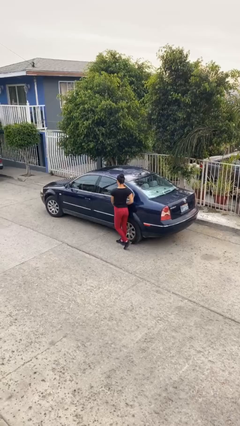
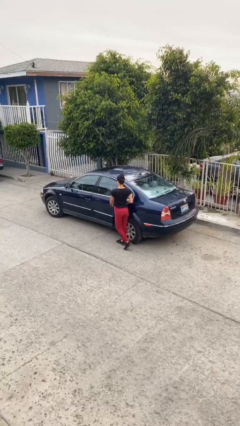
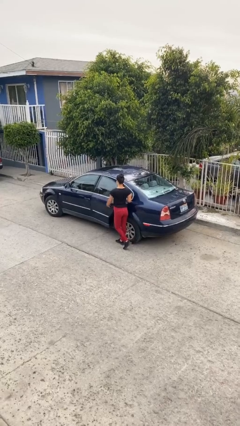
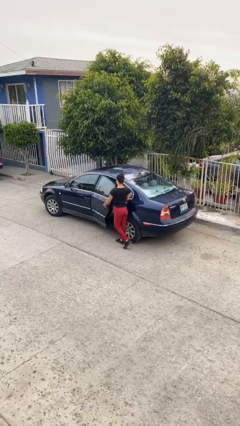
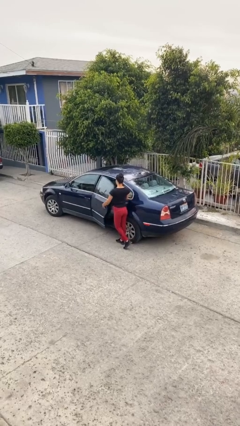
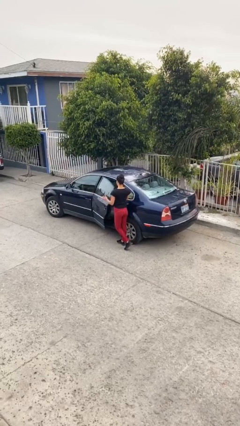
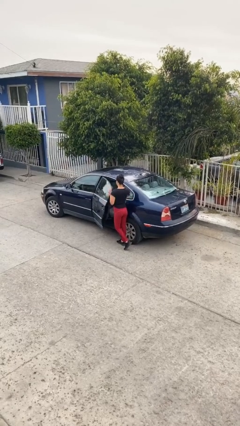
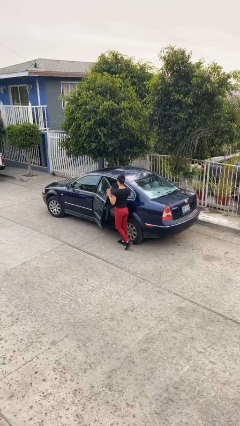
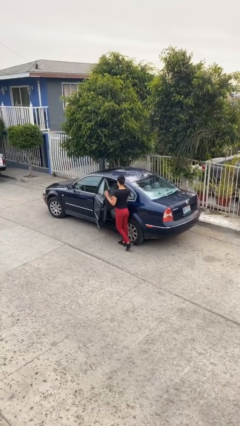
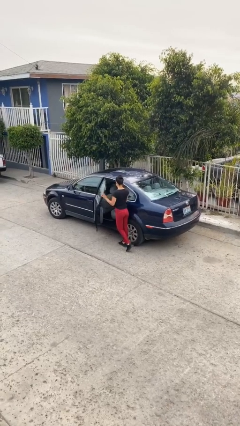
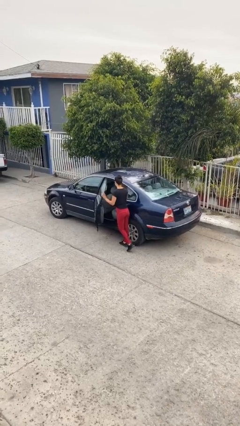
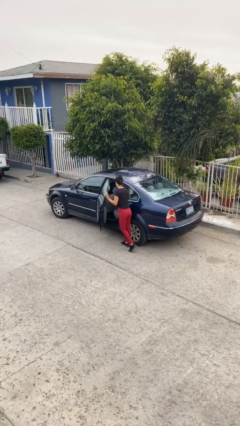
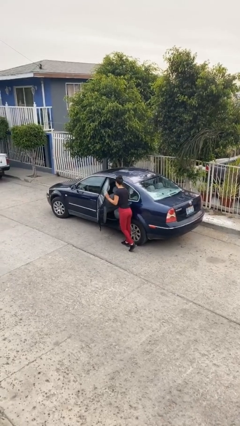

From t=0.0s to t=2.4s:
person opens car door

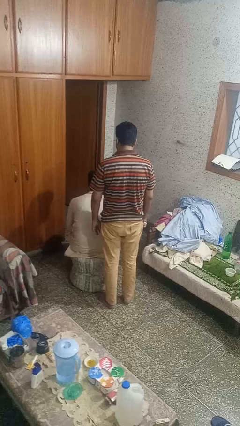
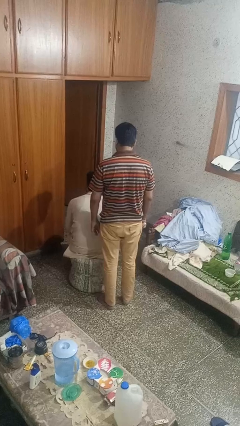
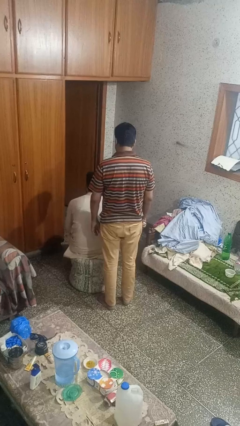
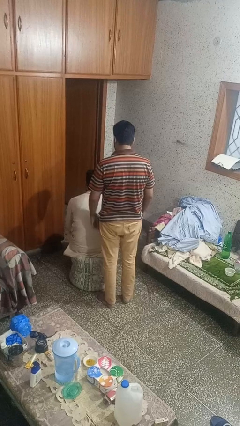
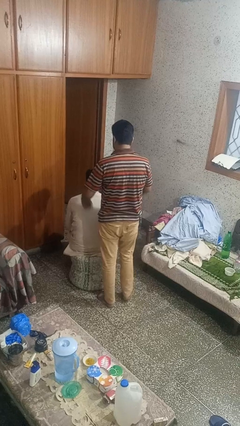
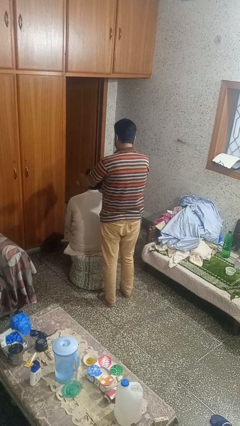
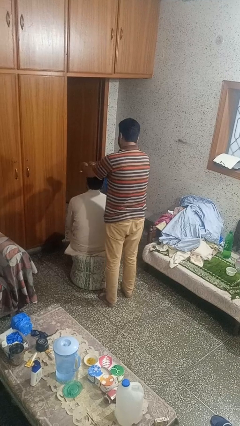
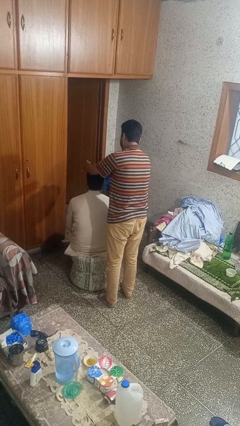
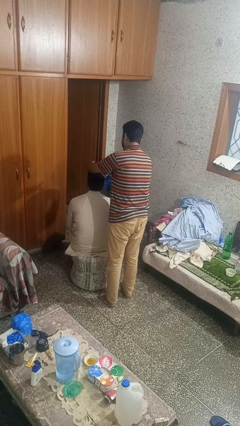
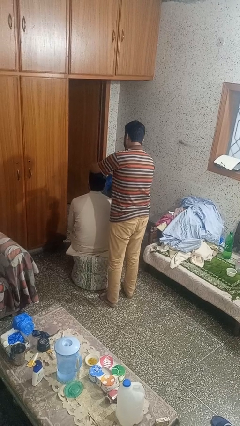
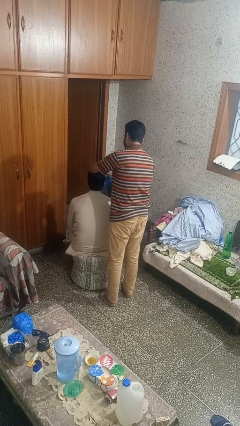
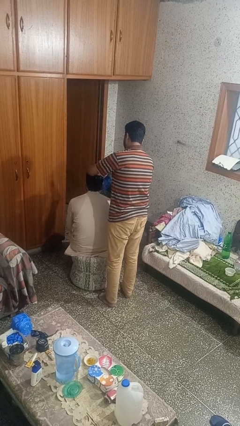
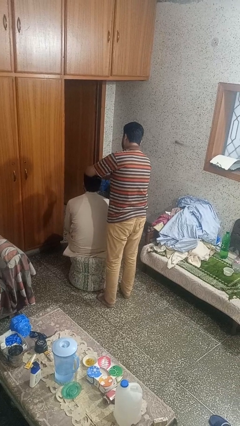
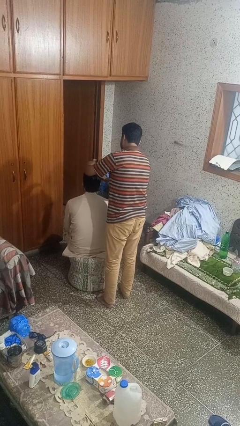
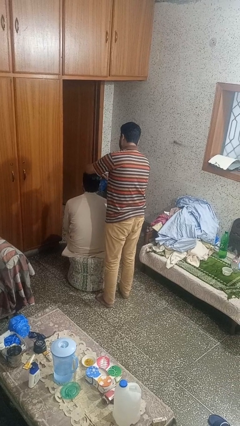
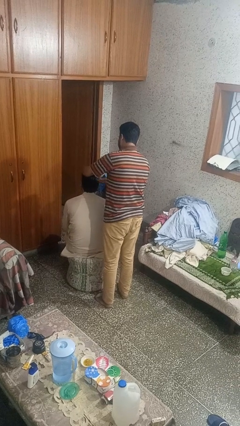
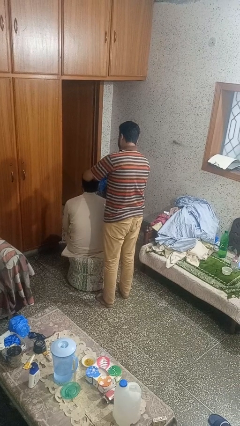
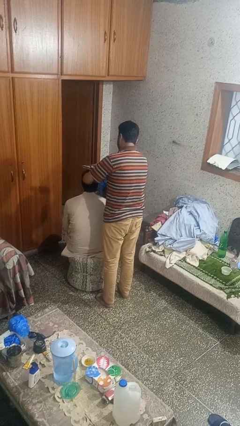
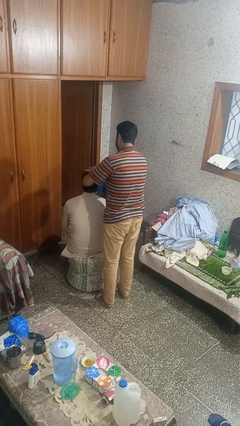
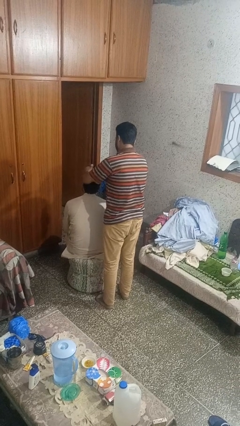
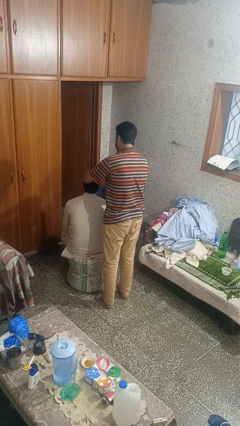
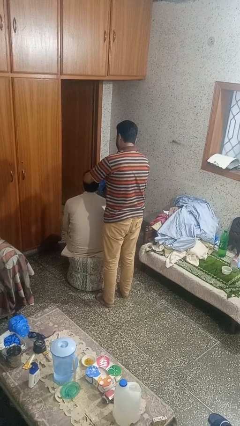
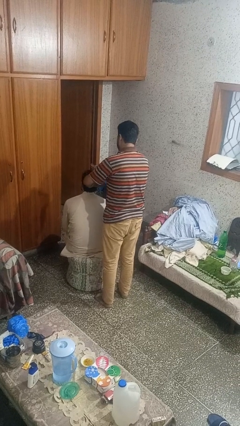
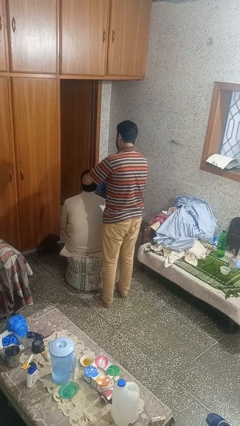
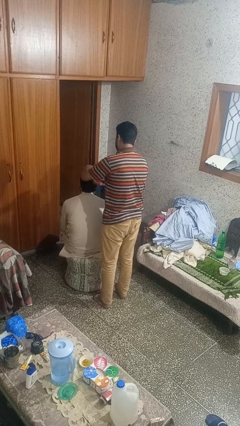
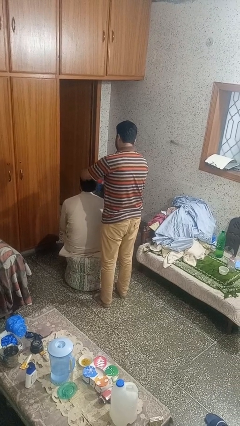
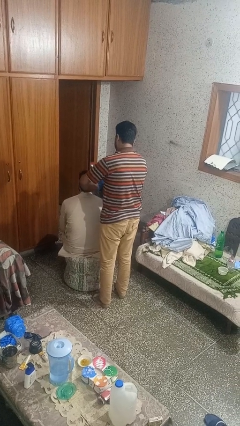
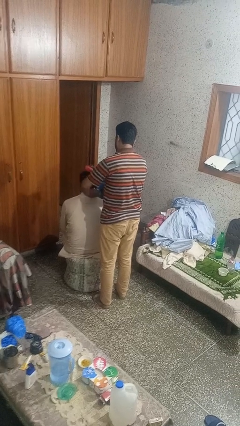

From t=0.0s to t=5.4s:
person brushes hair of person

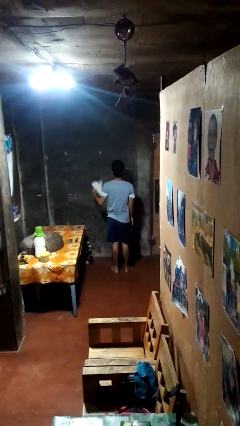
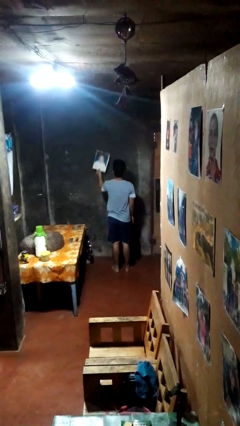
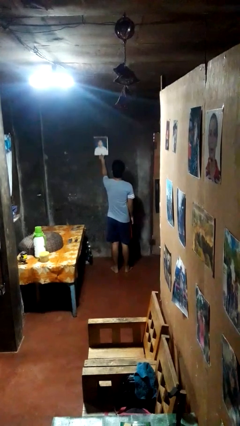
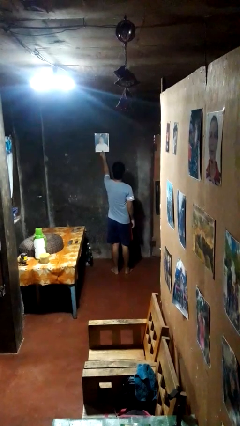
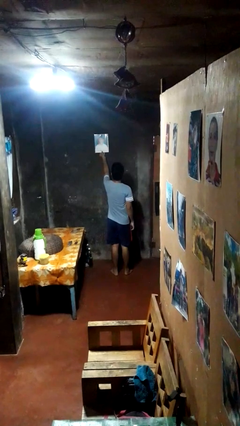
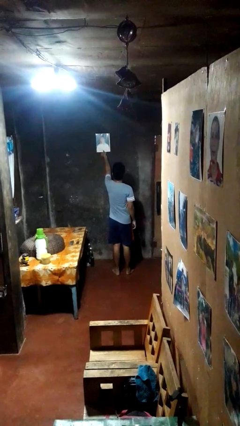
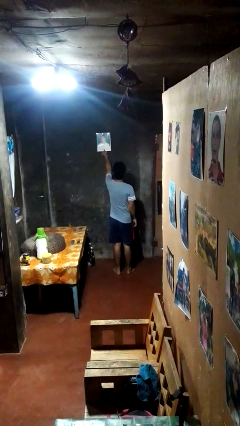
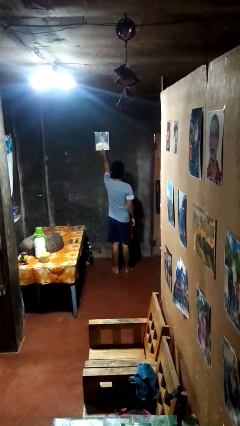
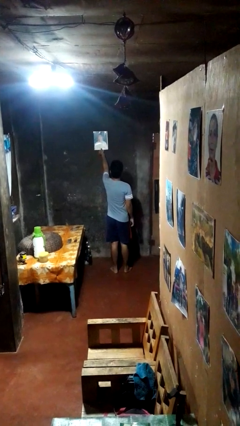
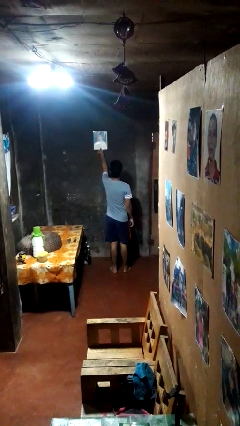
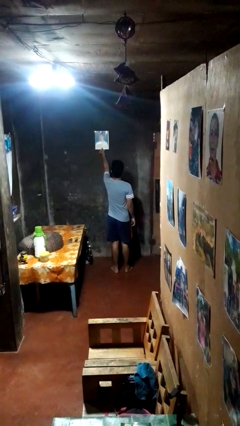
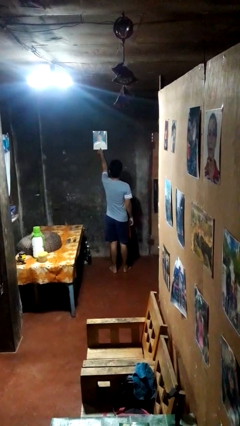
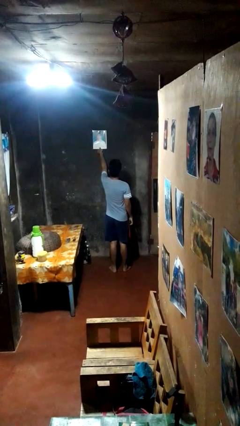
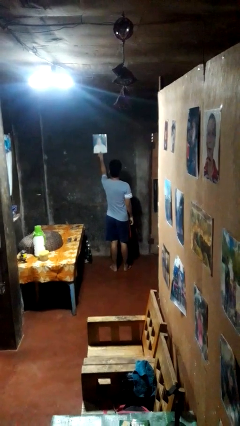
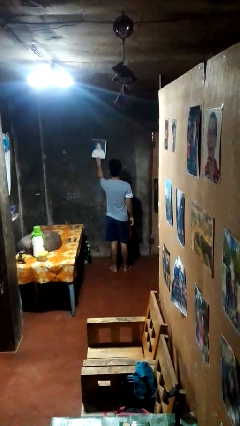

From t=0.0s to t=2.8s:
person puts up picture frame

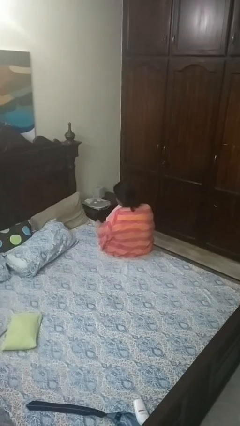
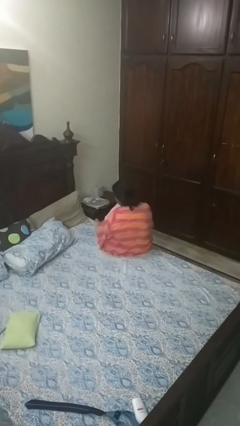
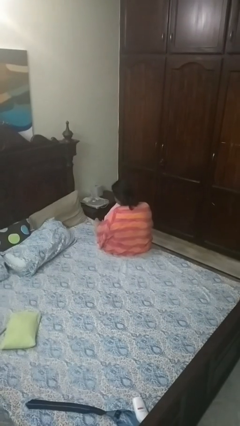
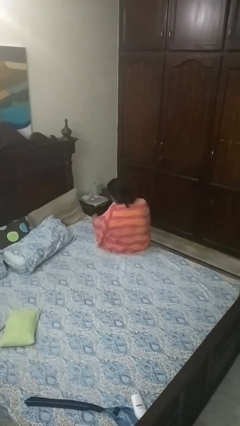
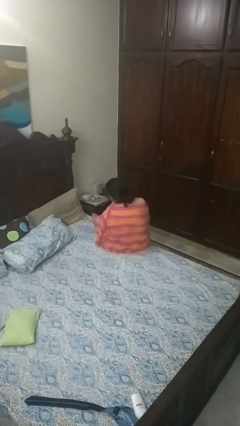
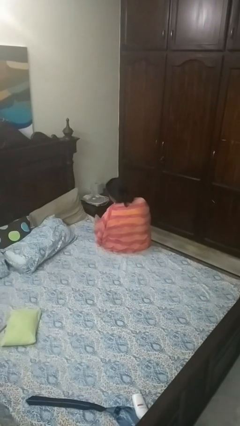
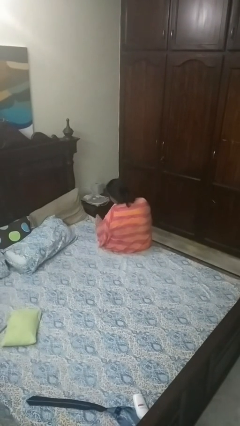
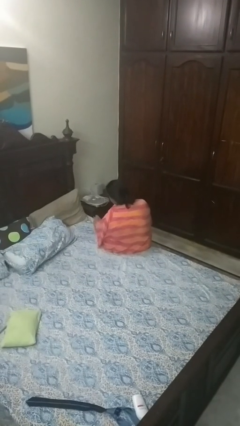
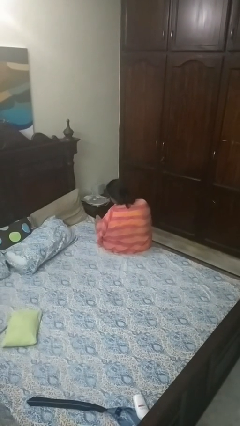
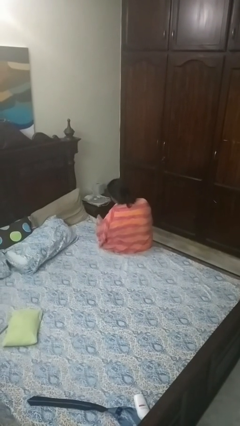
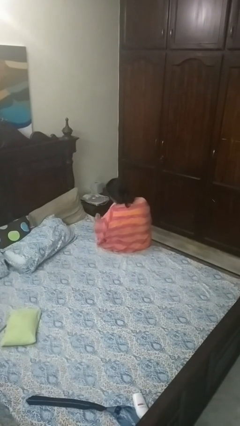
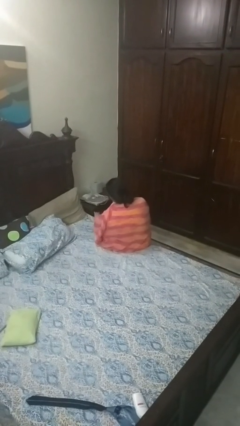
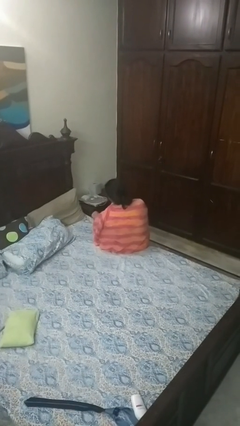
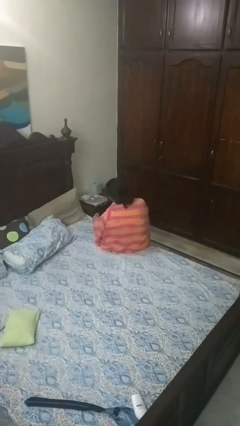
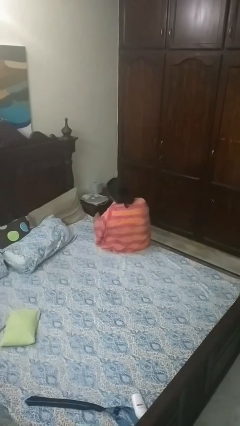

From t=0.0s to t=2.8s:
person rubs foot

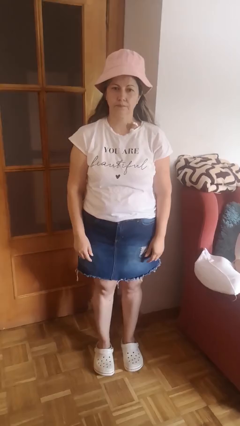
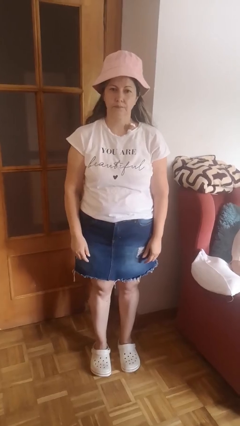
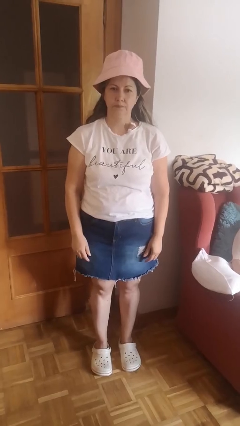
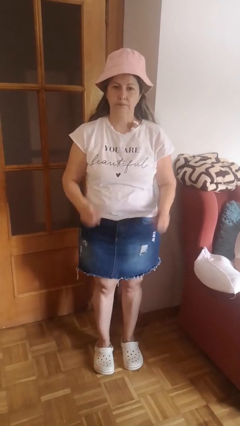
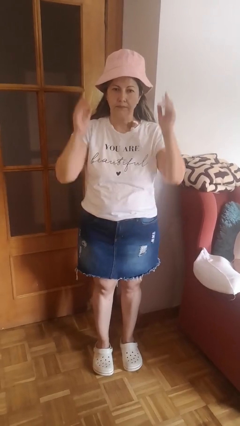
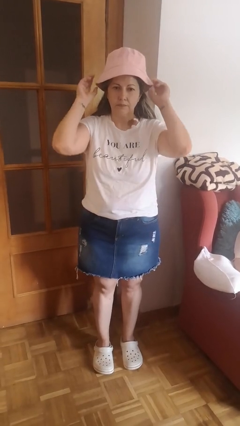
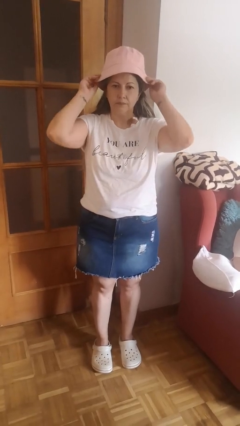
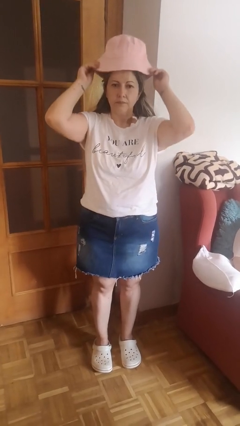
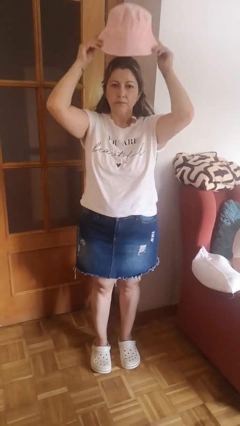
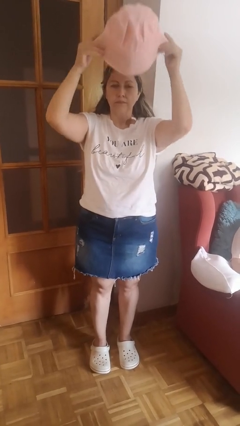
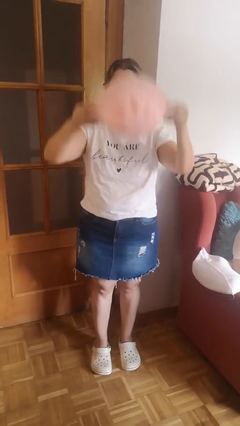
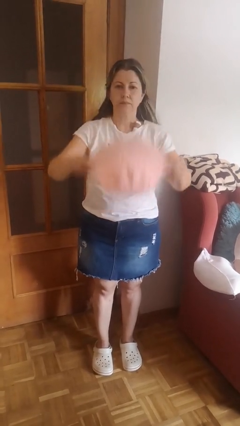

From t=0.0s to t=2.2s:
person takes off hat

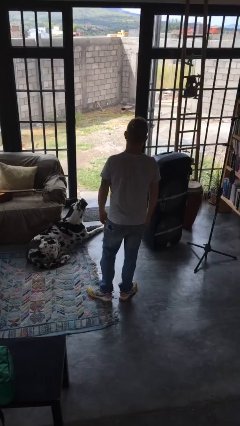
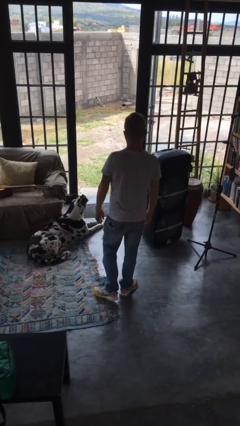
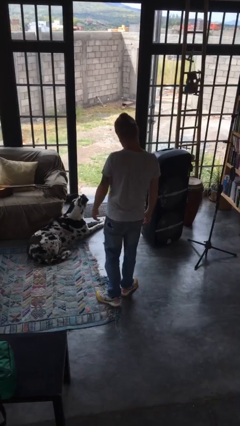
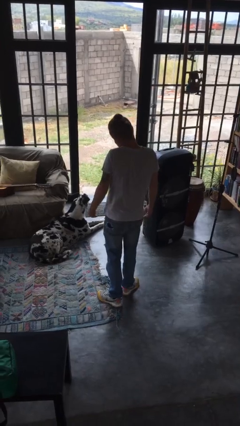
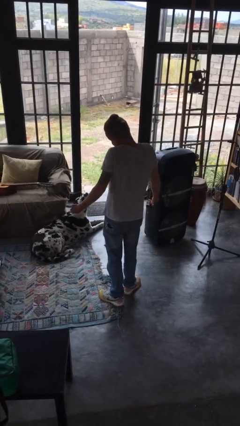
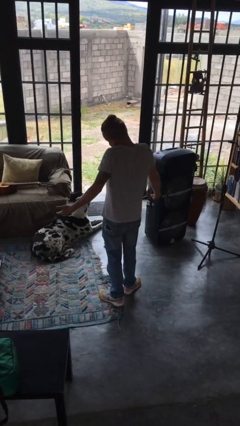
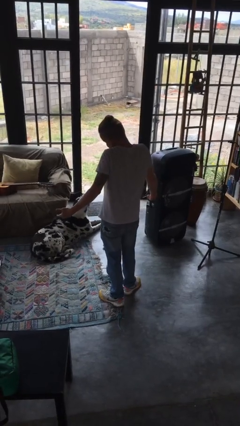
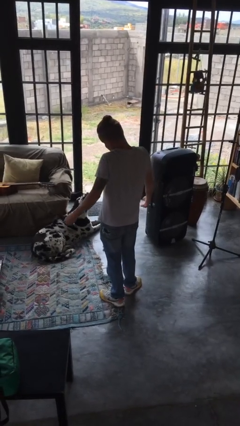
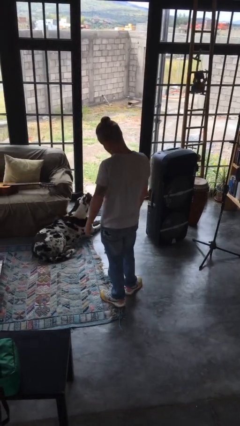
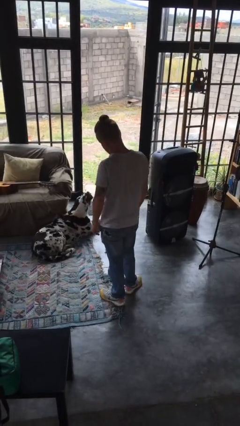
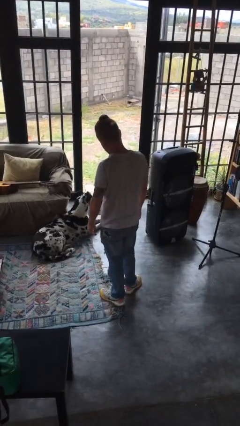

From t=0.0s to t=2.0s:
person shrugs
